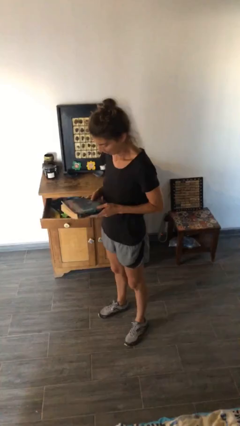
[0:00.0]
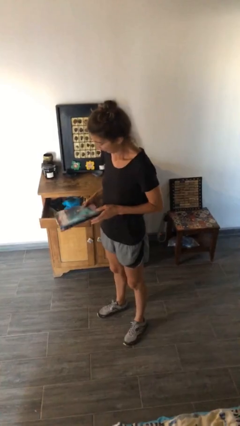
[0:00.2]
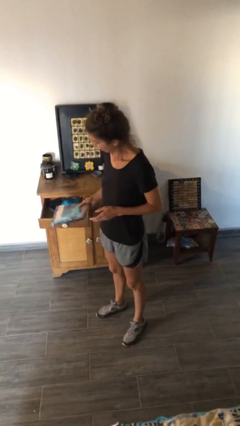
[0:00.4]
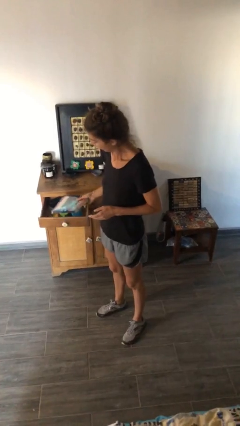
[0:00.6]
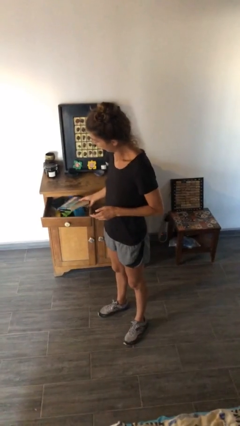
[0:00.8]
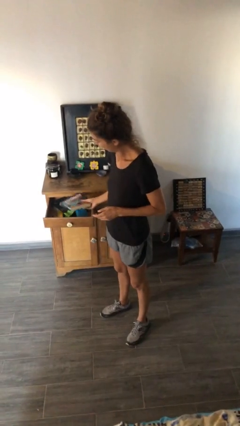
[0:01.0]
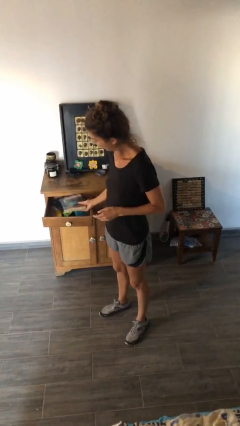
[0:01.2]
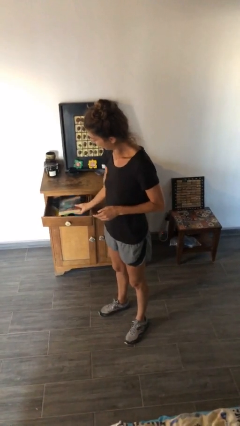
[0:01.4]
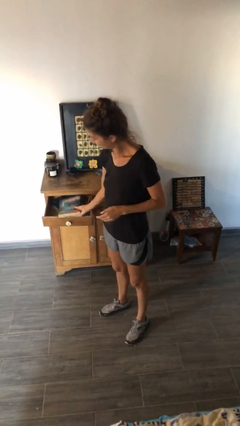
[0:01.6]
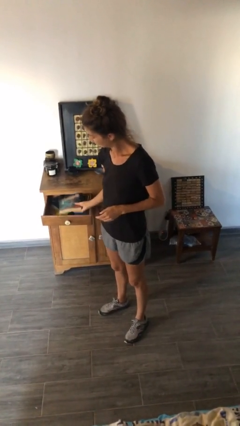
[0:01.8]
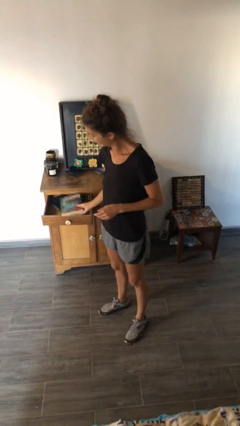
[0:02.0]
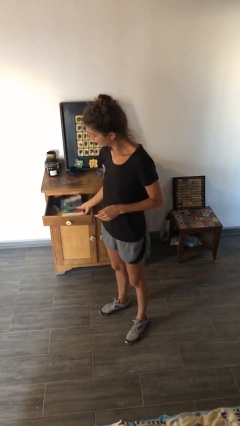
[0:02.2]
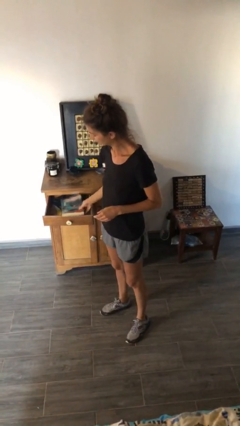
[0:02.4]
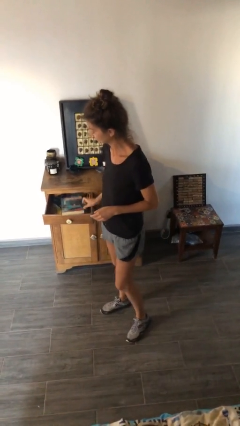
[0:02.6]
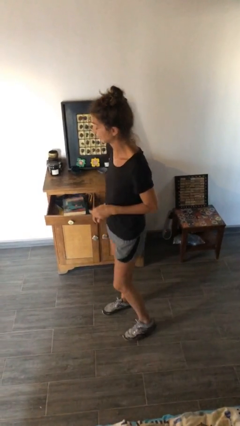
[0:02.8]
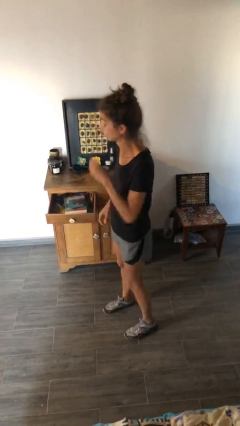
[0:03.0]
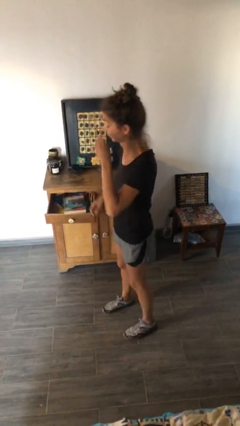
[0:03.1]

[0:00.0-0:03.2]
person puts down object into cabinet

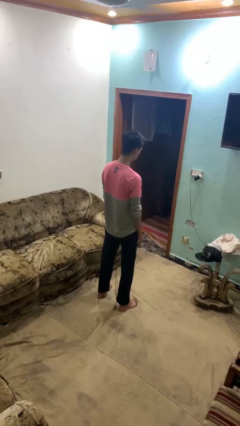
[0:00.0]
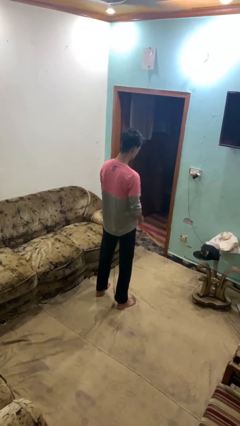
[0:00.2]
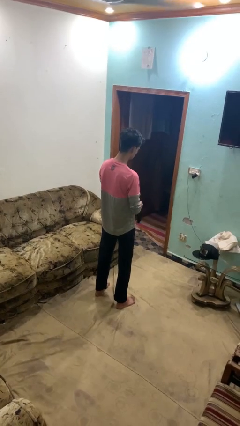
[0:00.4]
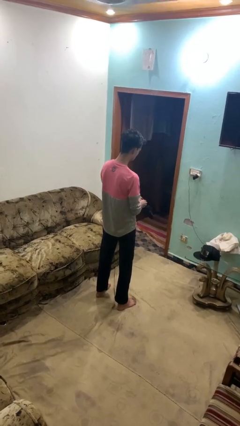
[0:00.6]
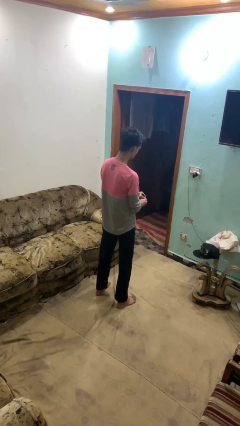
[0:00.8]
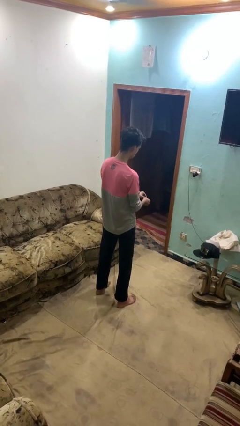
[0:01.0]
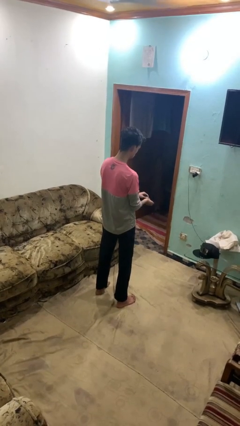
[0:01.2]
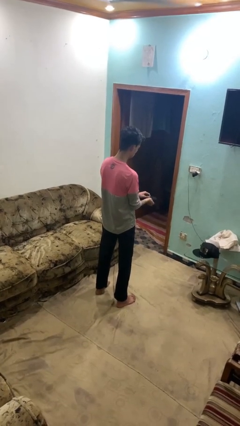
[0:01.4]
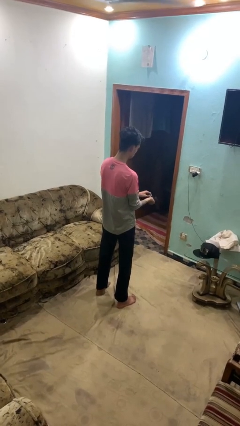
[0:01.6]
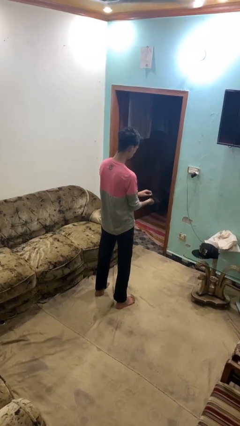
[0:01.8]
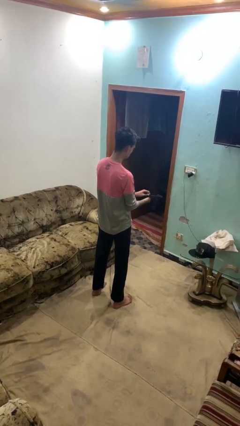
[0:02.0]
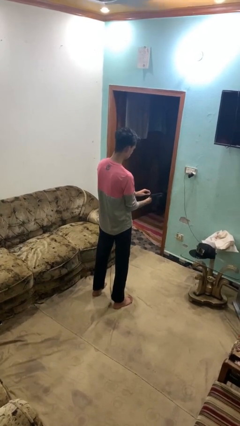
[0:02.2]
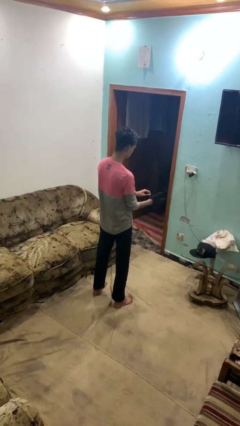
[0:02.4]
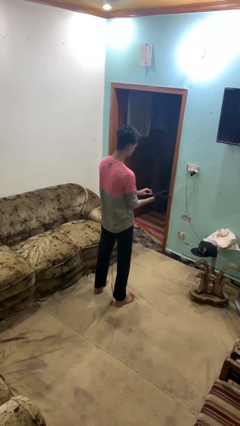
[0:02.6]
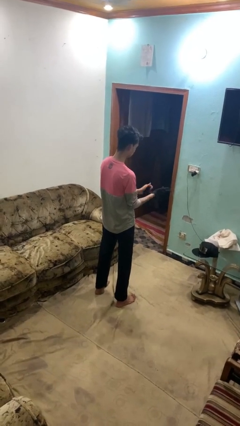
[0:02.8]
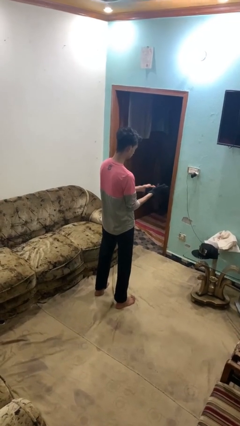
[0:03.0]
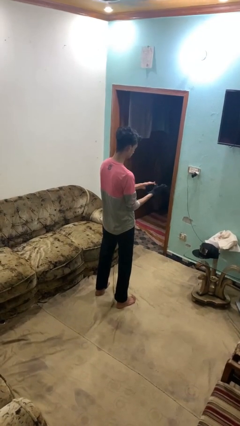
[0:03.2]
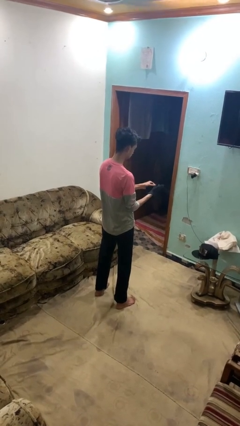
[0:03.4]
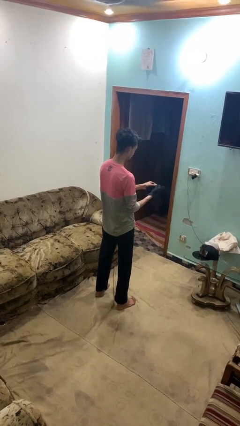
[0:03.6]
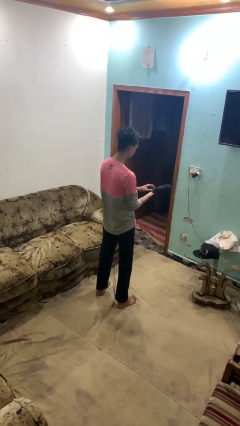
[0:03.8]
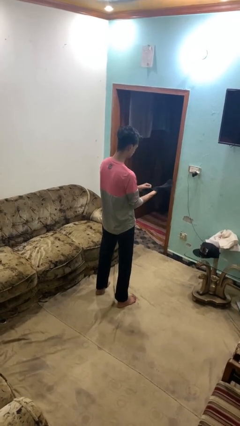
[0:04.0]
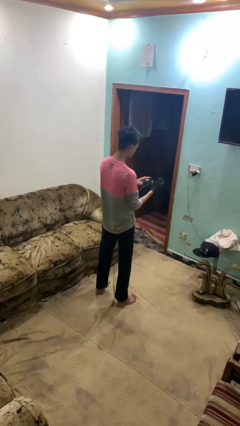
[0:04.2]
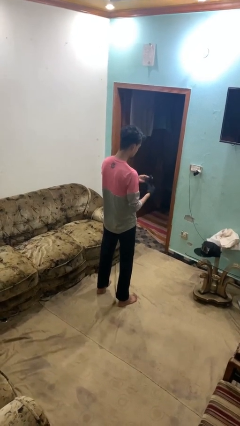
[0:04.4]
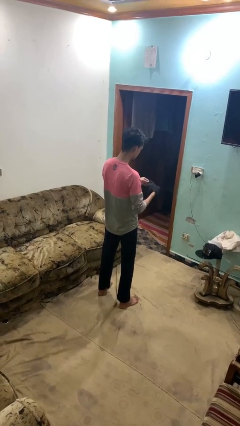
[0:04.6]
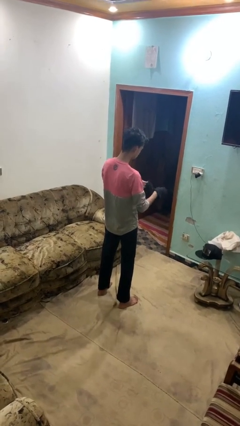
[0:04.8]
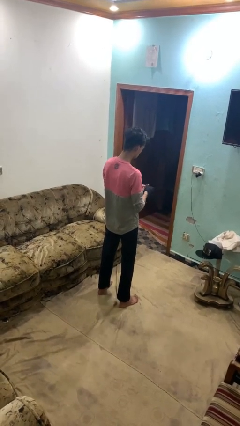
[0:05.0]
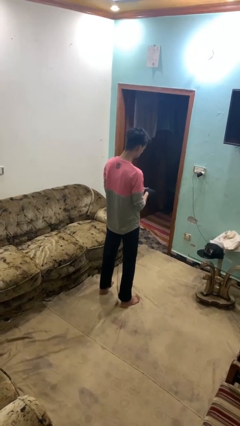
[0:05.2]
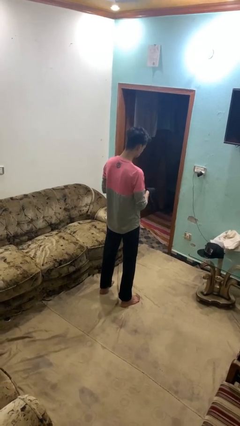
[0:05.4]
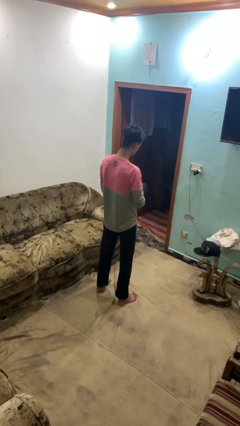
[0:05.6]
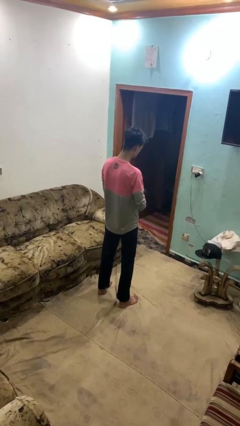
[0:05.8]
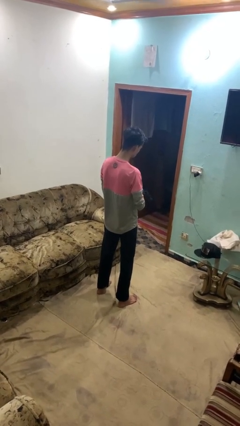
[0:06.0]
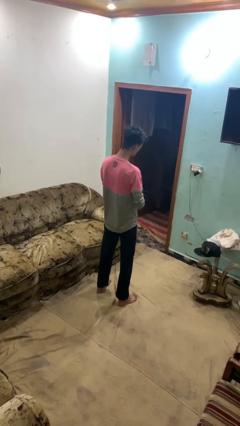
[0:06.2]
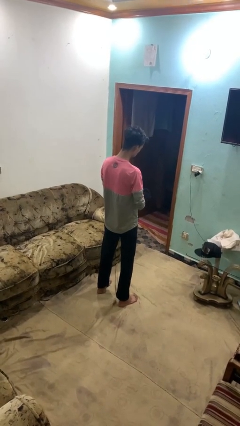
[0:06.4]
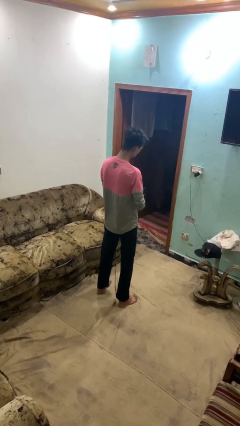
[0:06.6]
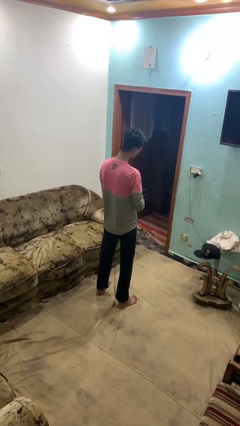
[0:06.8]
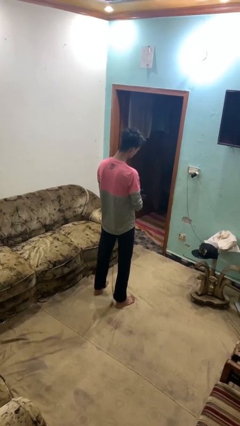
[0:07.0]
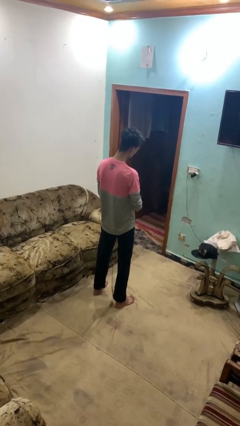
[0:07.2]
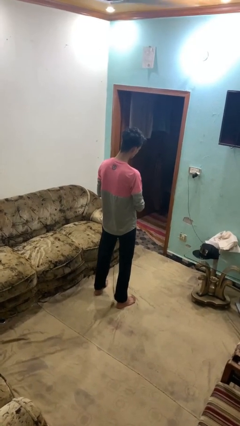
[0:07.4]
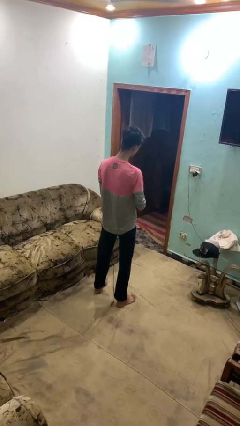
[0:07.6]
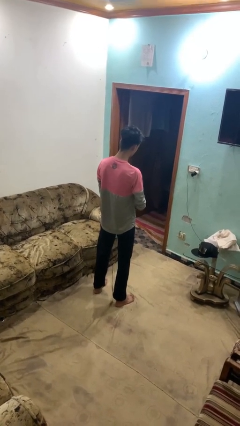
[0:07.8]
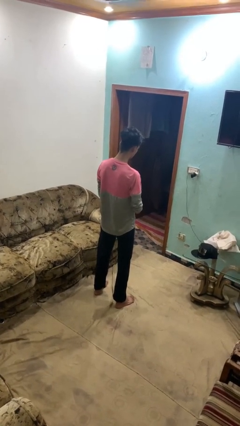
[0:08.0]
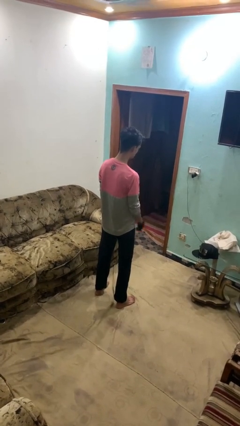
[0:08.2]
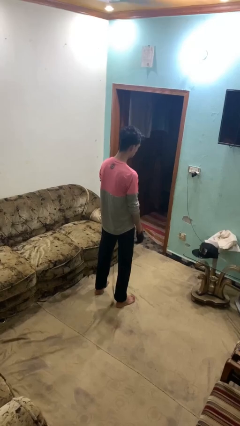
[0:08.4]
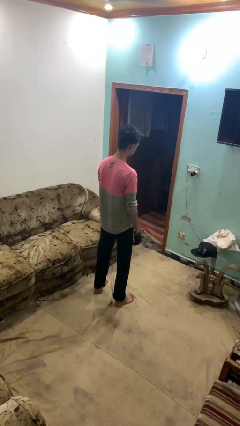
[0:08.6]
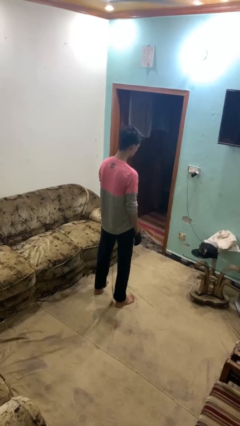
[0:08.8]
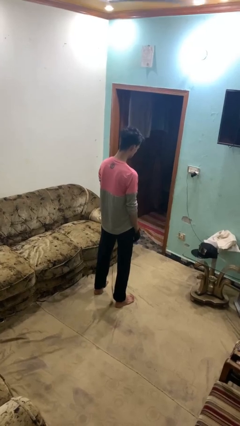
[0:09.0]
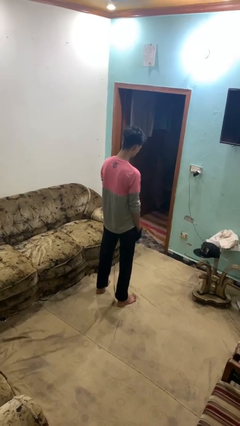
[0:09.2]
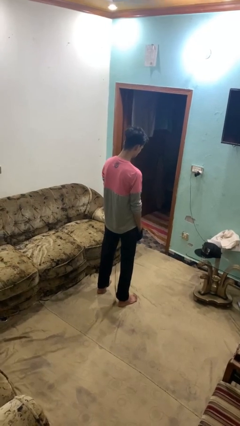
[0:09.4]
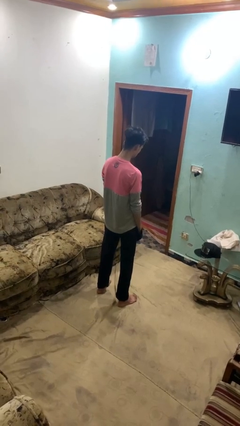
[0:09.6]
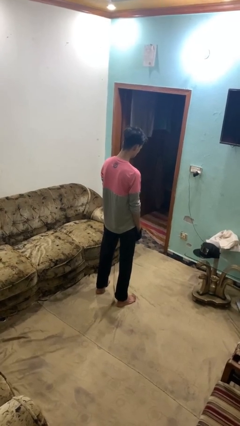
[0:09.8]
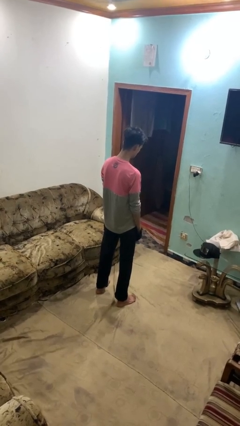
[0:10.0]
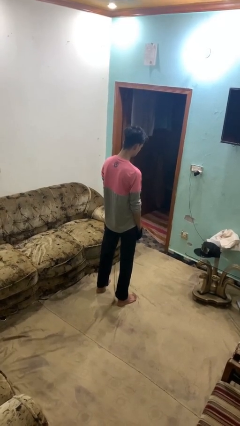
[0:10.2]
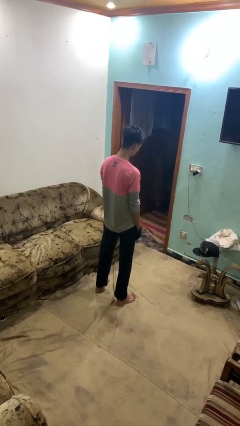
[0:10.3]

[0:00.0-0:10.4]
person puts on gloves

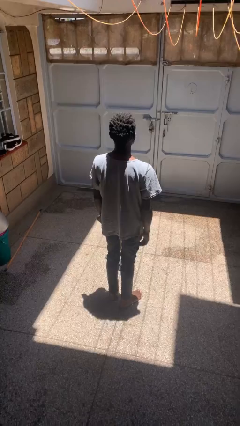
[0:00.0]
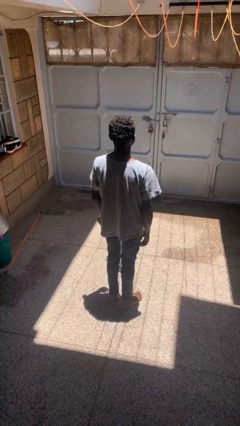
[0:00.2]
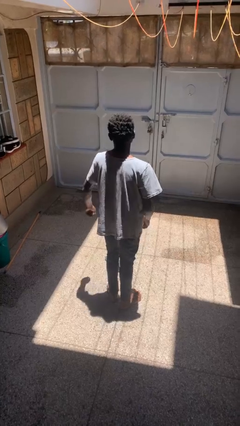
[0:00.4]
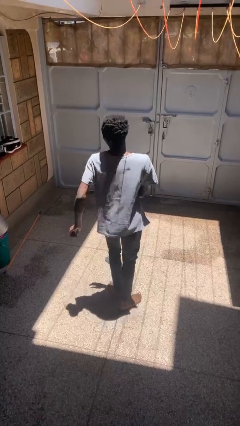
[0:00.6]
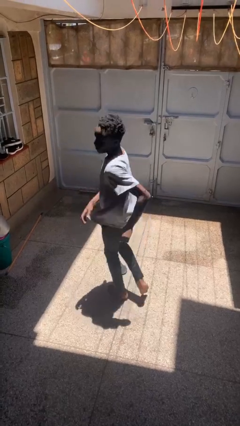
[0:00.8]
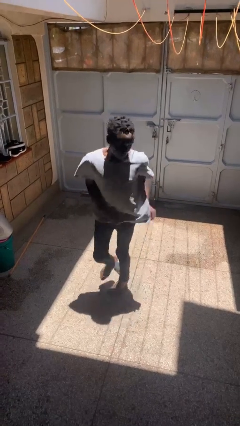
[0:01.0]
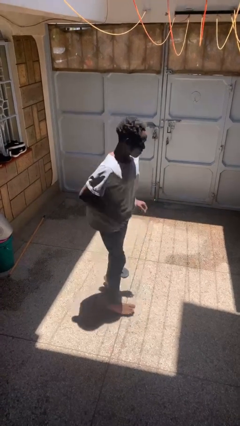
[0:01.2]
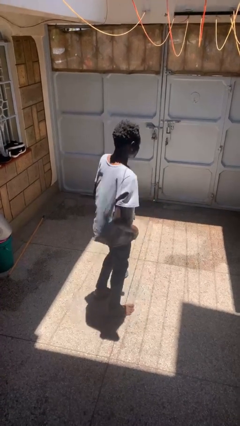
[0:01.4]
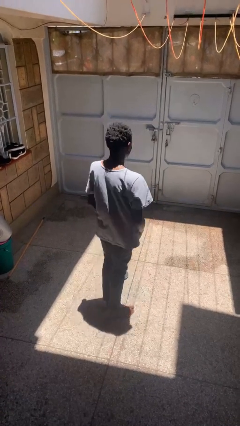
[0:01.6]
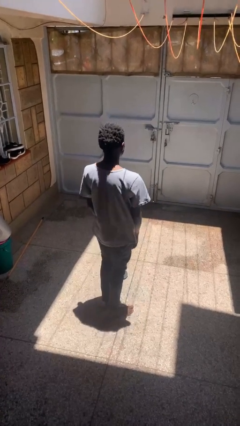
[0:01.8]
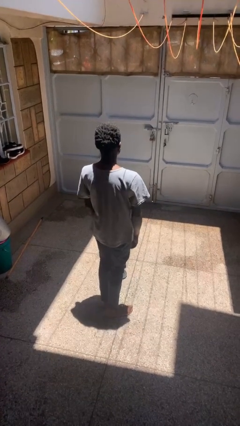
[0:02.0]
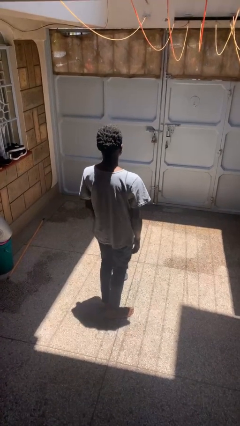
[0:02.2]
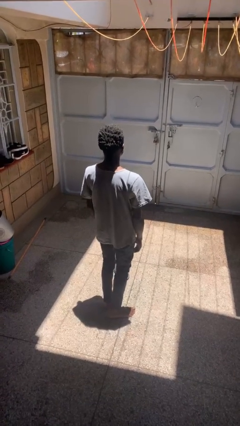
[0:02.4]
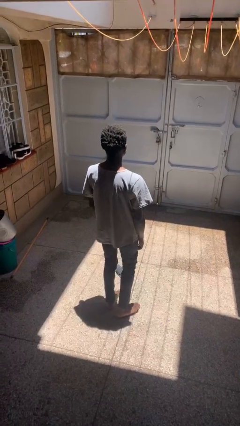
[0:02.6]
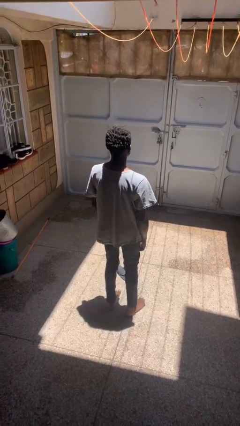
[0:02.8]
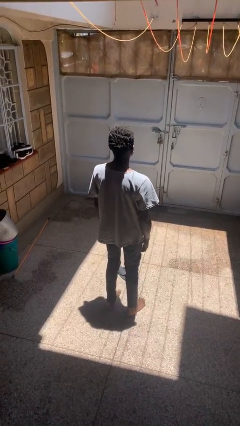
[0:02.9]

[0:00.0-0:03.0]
person twirls

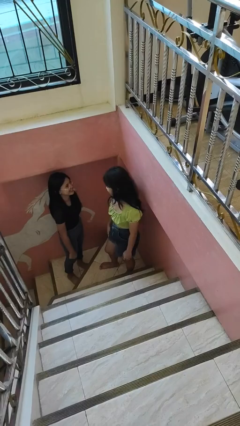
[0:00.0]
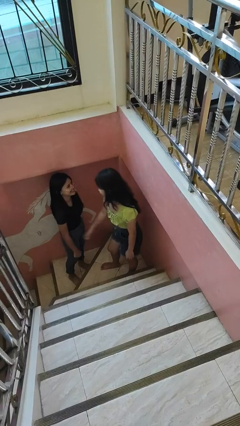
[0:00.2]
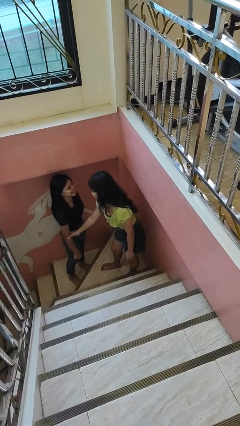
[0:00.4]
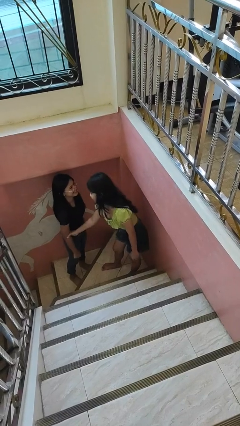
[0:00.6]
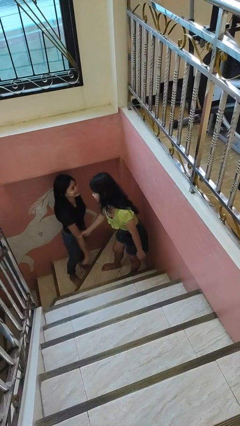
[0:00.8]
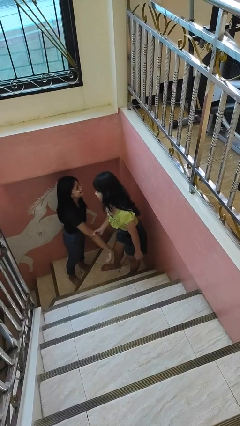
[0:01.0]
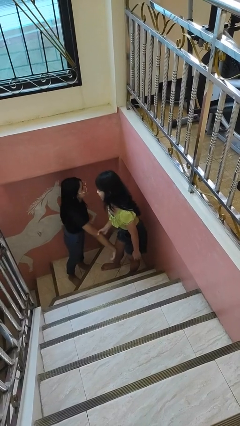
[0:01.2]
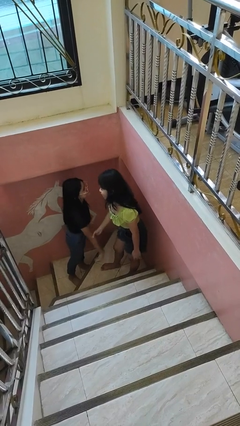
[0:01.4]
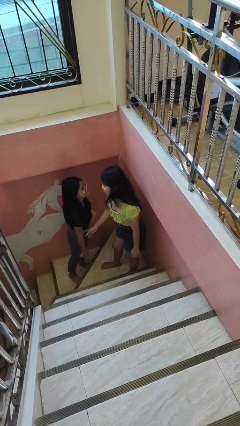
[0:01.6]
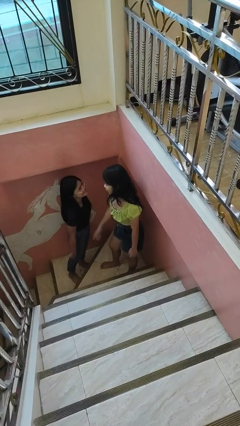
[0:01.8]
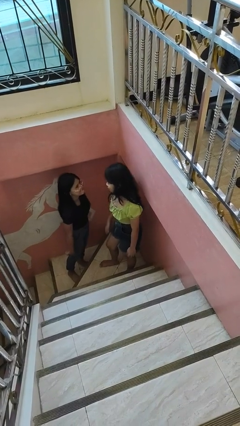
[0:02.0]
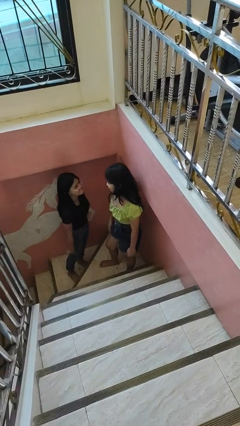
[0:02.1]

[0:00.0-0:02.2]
person grabs person by forearm
